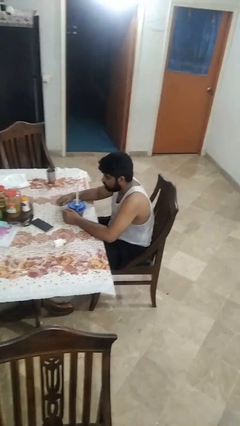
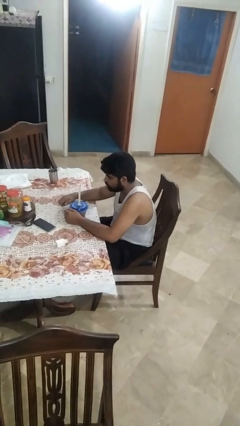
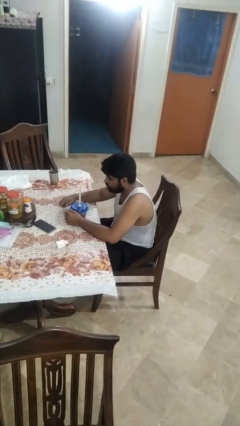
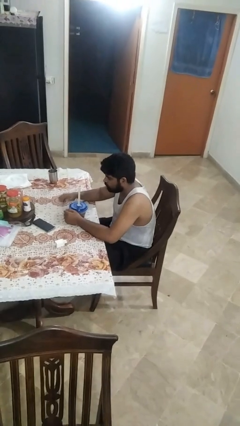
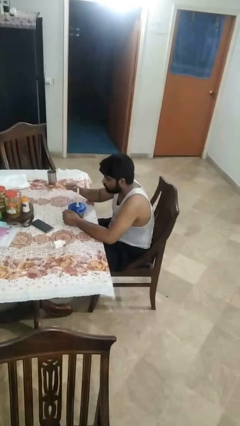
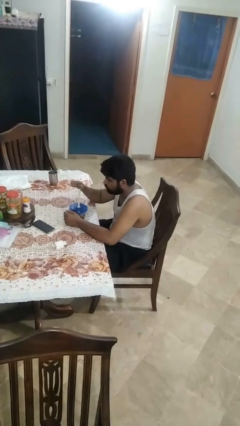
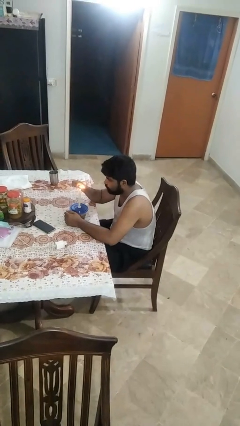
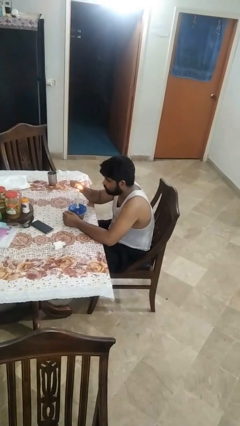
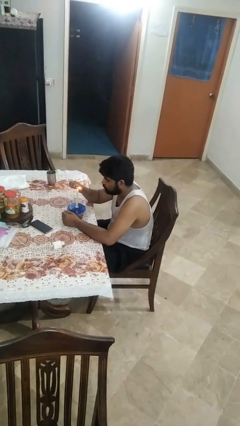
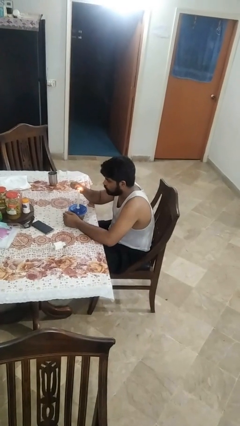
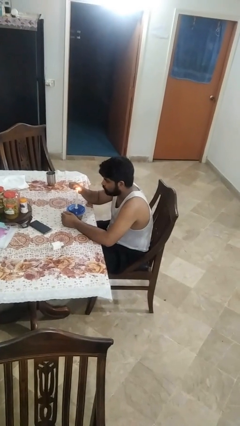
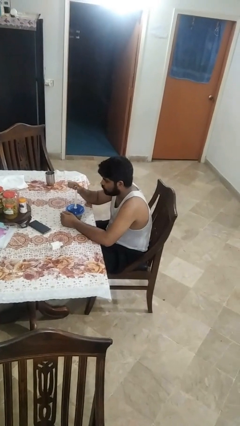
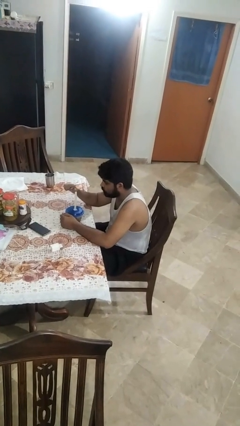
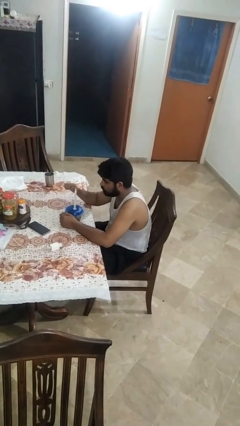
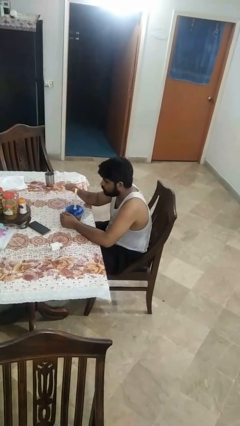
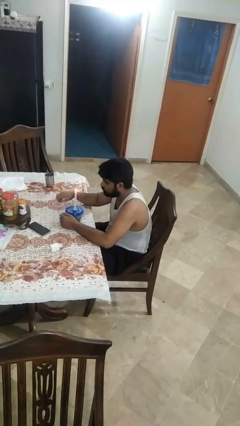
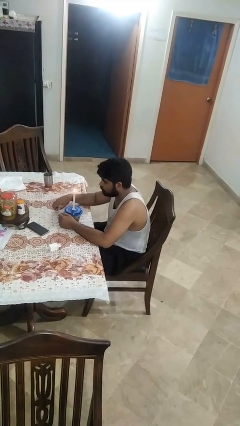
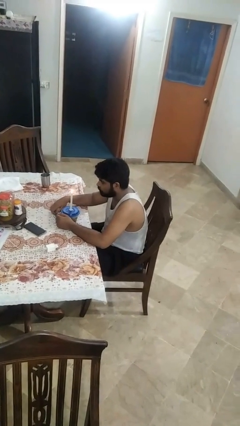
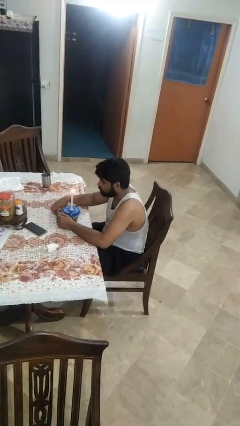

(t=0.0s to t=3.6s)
person lights candle

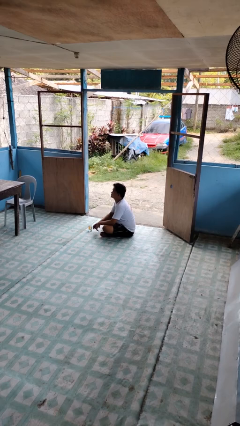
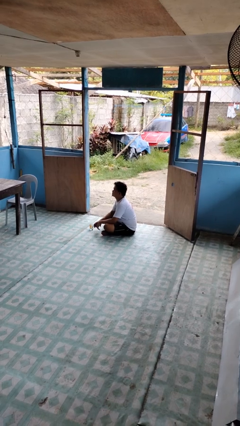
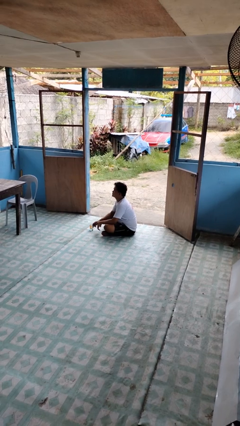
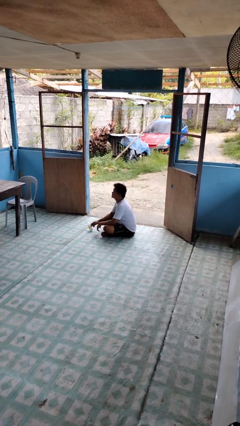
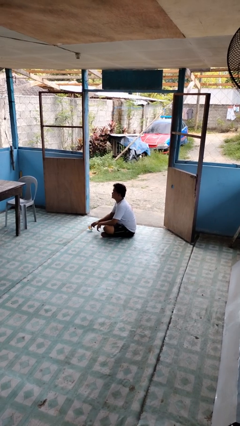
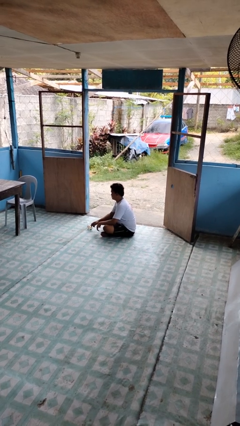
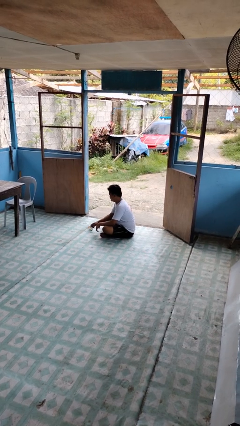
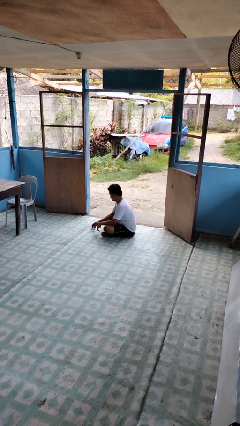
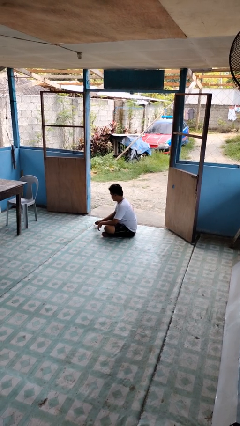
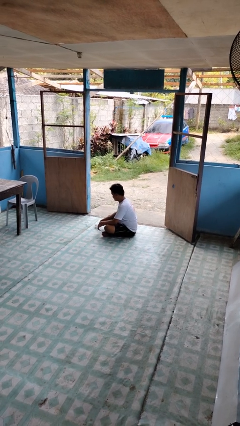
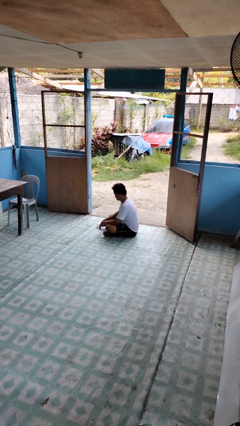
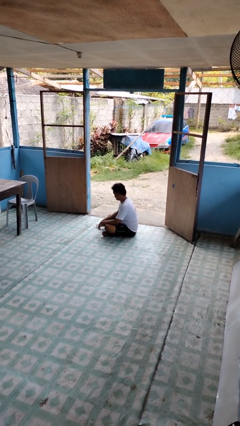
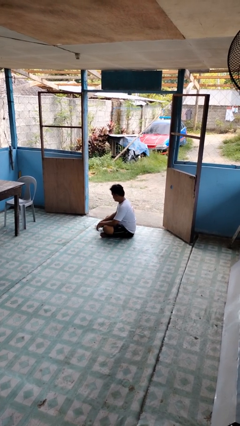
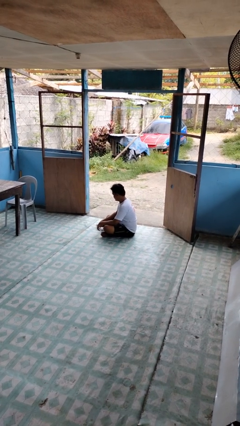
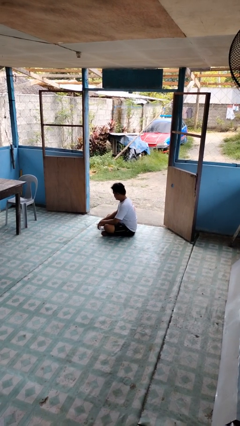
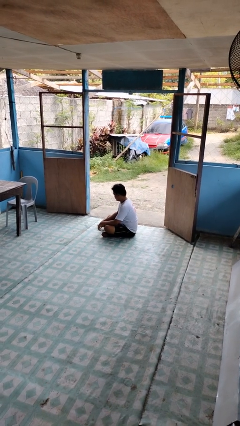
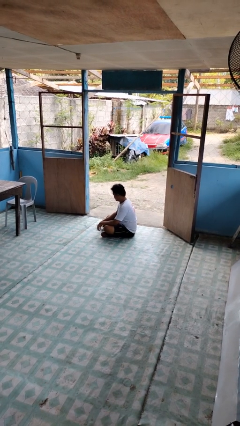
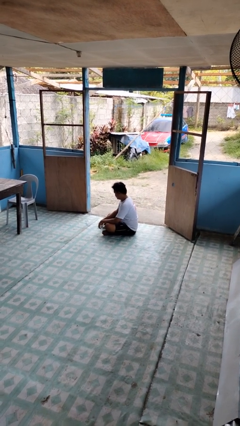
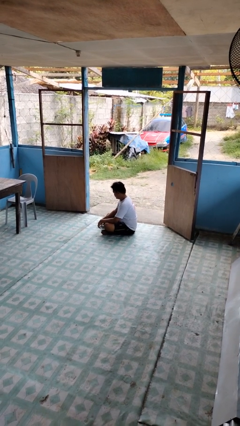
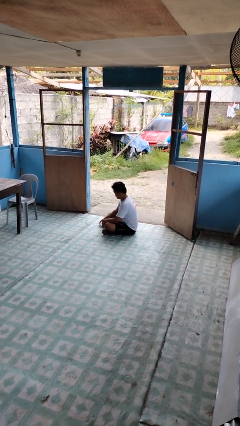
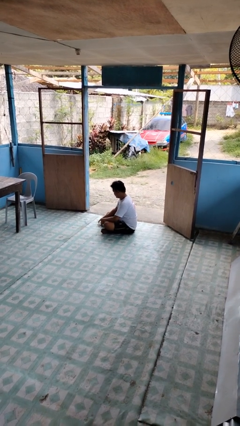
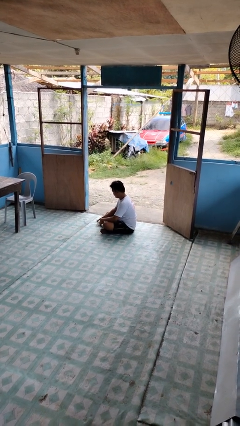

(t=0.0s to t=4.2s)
person spills on floor

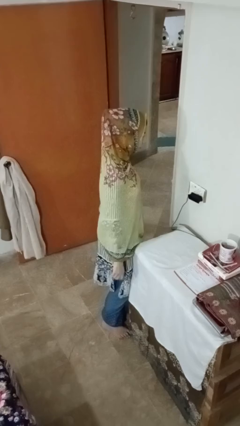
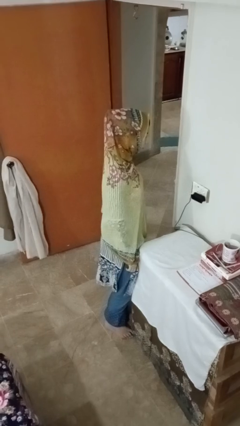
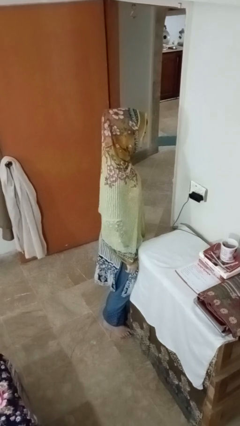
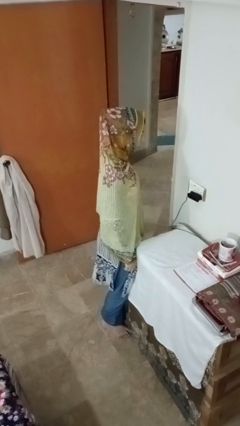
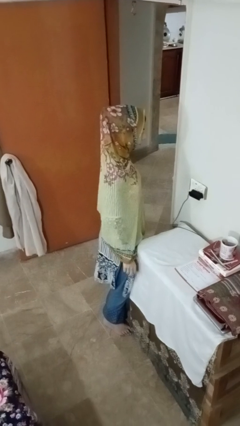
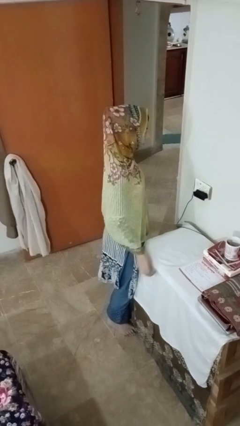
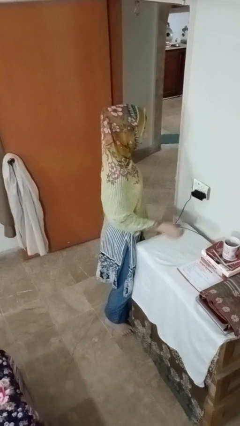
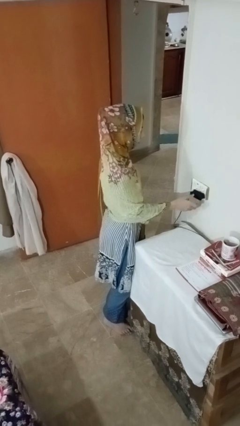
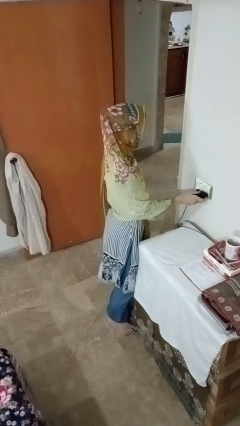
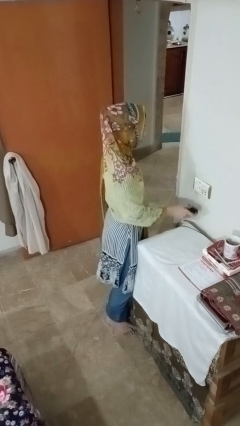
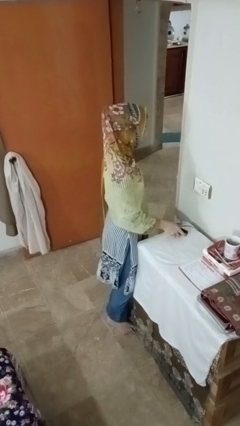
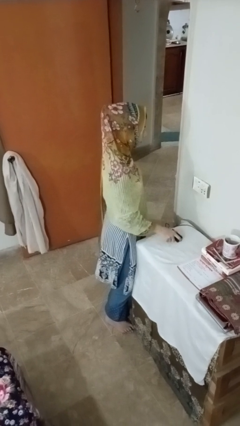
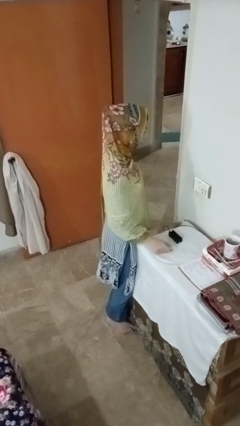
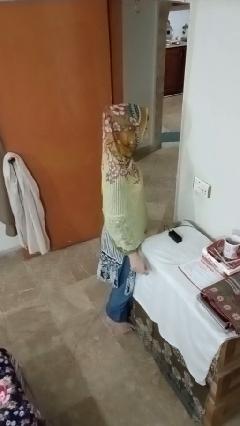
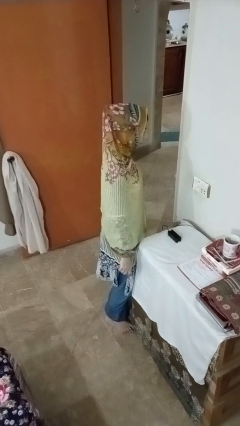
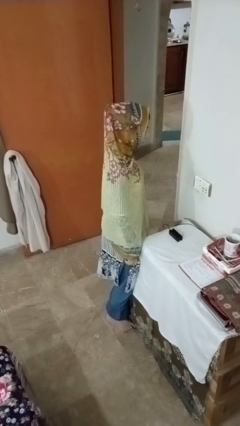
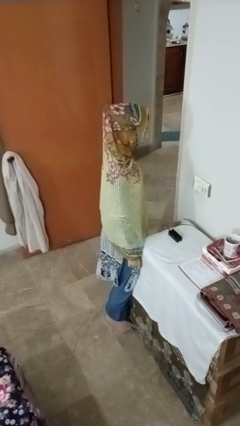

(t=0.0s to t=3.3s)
person unplugs from electrical socket

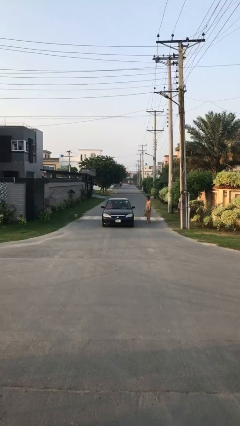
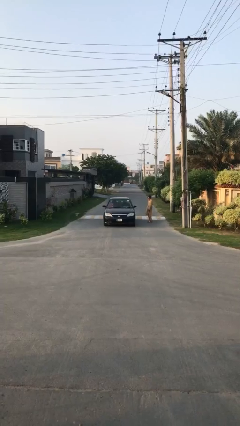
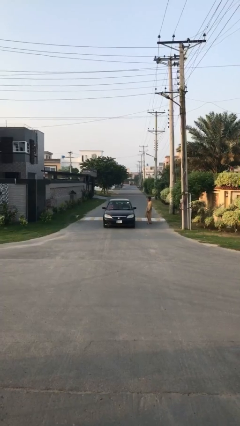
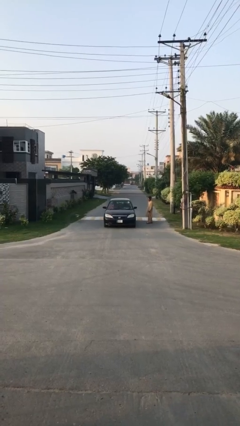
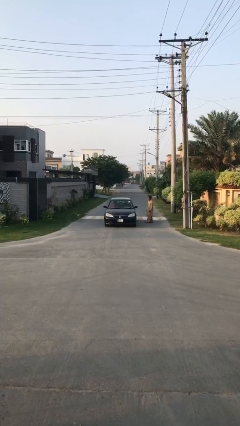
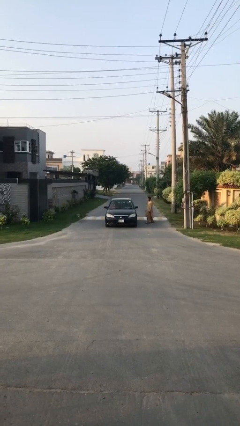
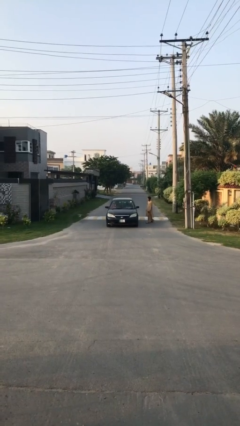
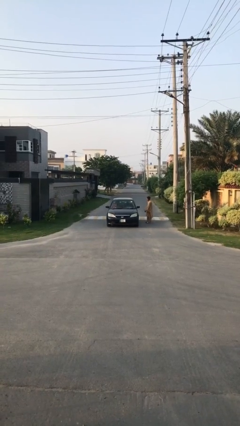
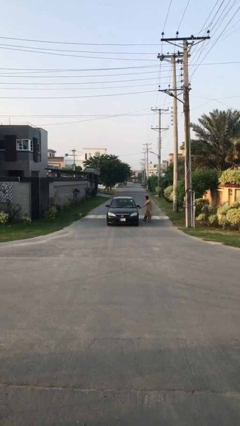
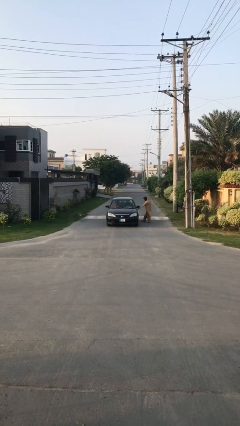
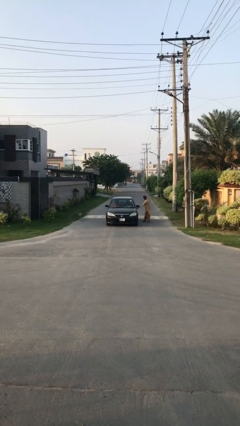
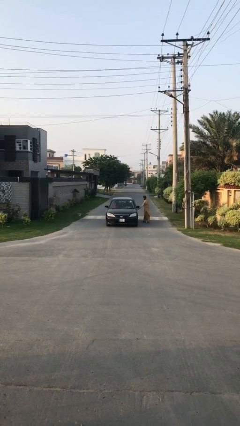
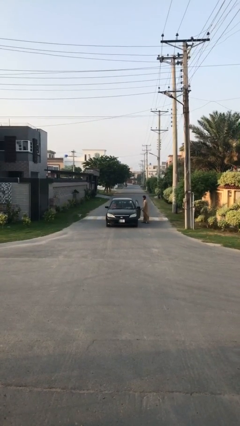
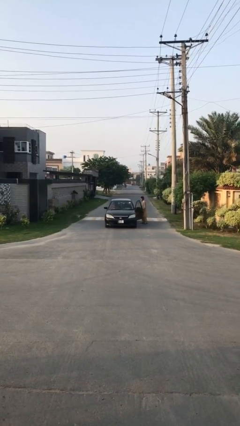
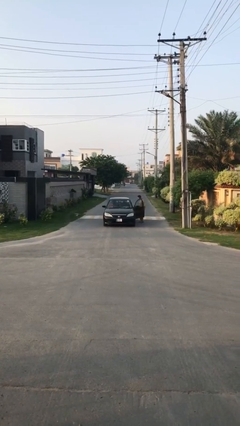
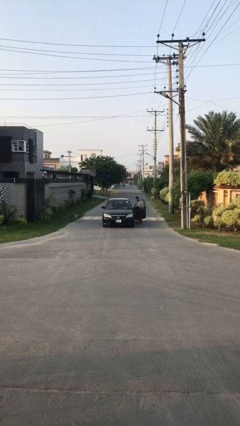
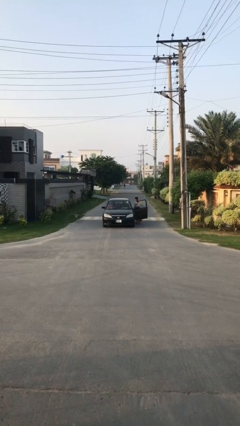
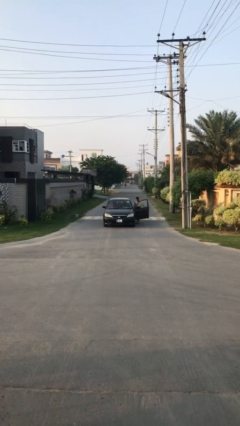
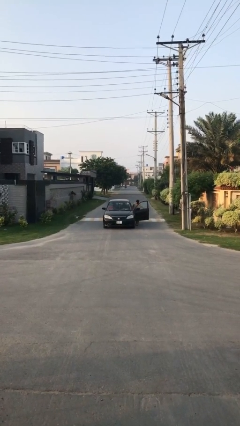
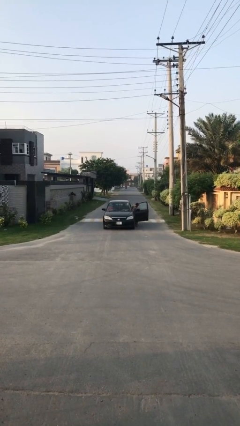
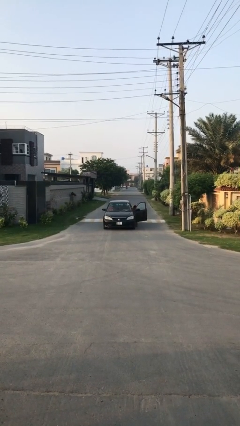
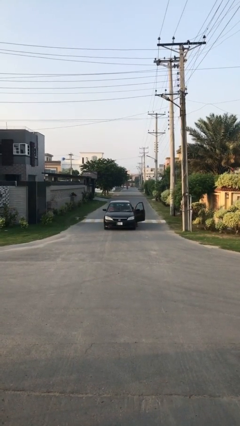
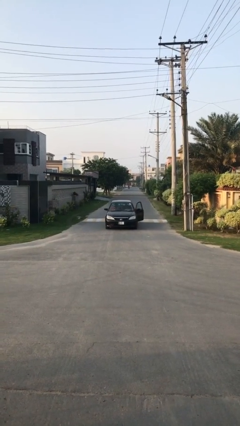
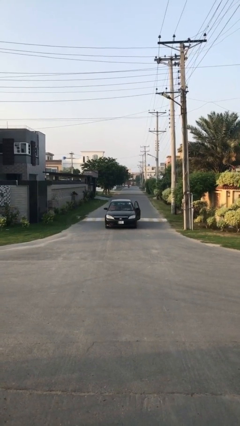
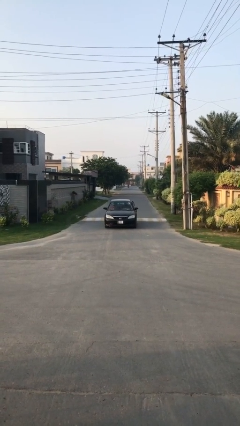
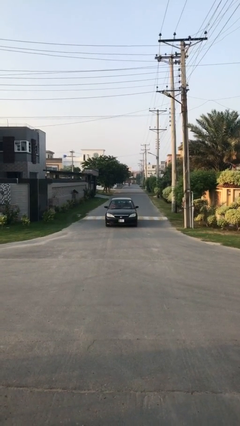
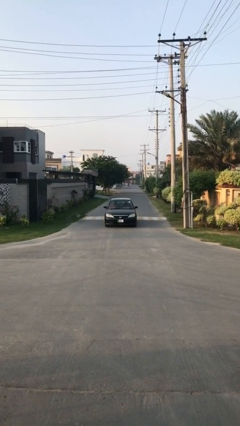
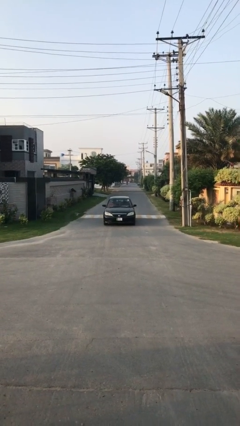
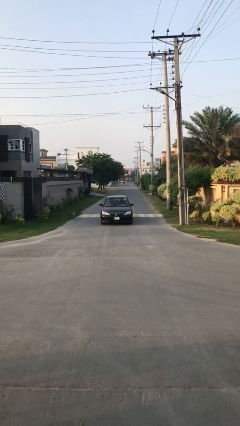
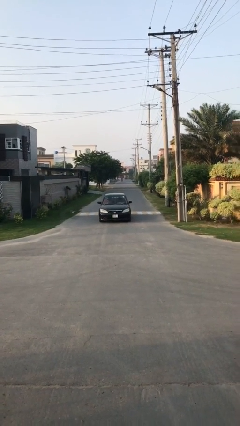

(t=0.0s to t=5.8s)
car picks up person

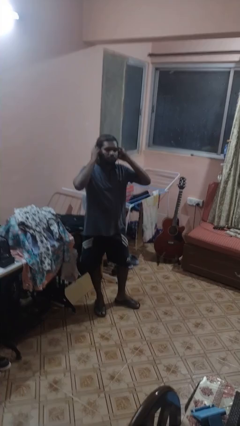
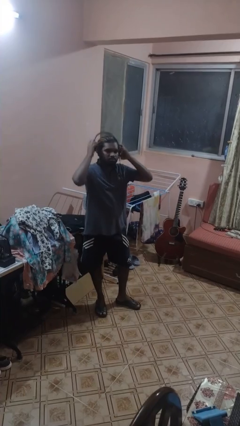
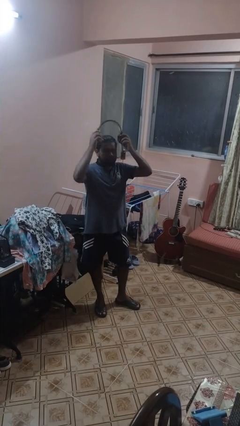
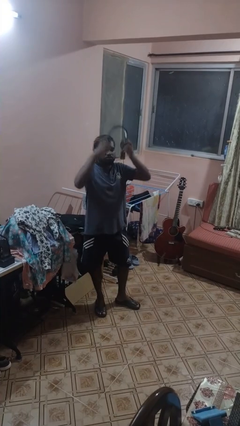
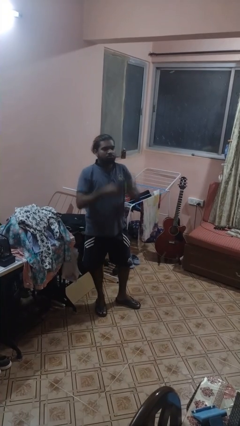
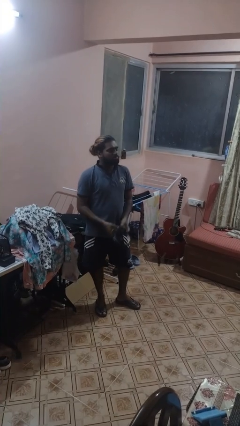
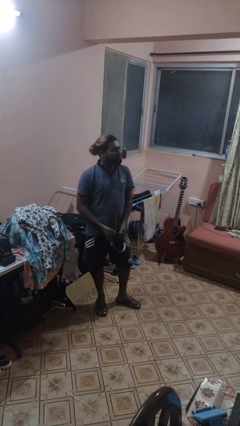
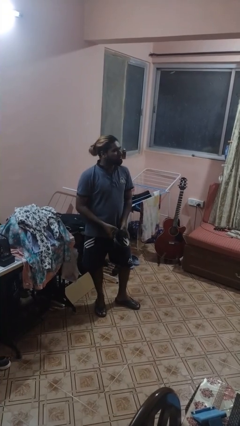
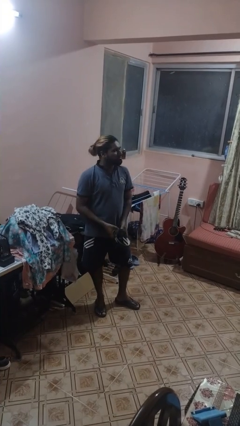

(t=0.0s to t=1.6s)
person takes off headphones
